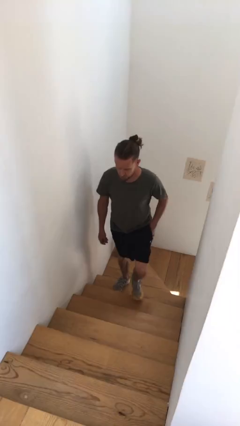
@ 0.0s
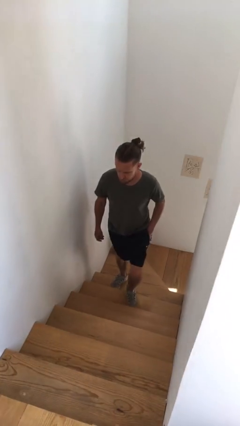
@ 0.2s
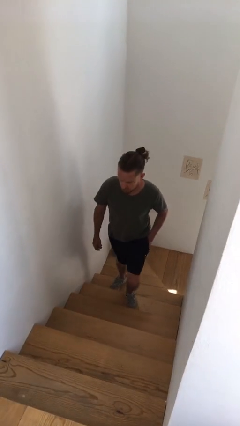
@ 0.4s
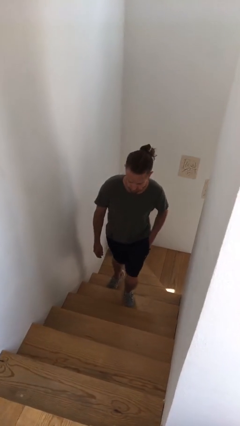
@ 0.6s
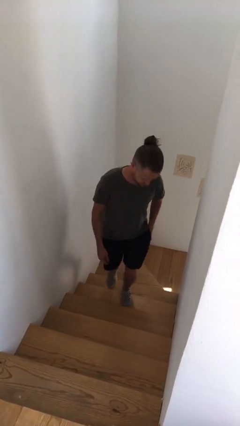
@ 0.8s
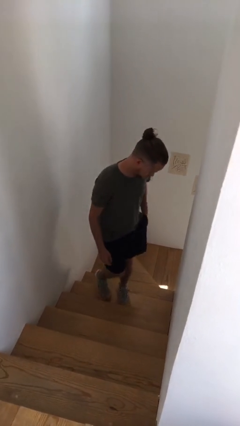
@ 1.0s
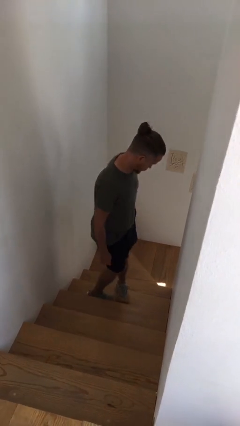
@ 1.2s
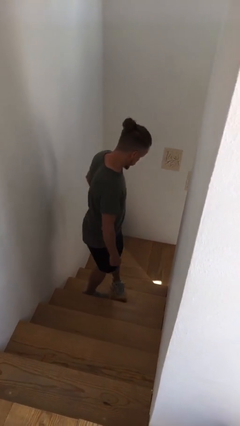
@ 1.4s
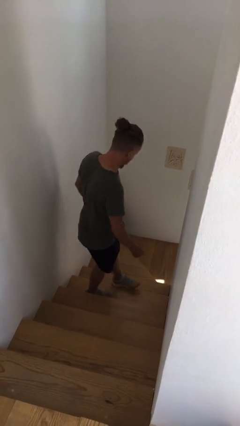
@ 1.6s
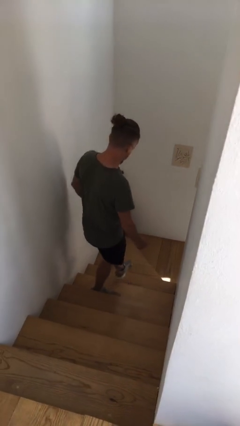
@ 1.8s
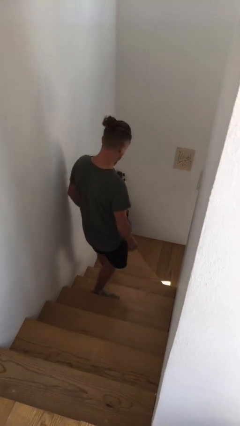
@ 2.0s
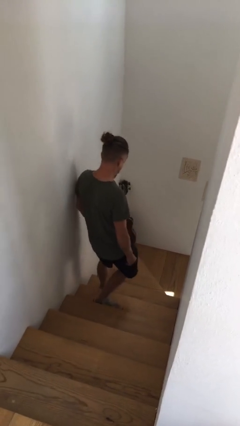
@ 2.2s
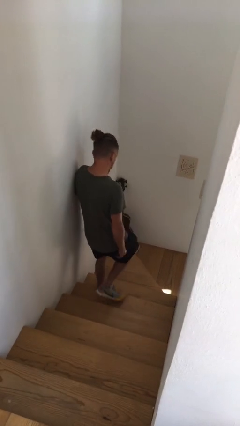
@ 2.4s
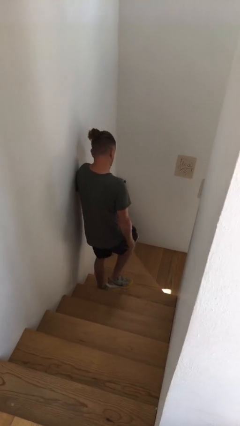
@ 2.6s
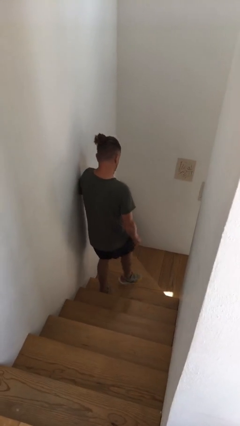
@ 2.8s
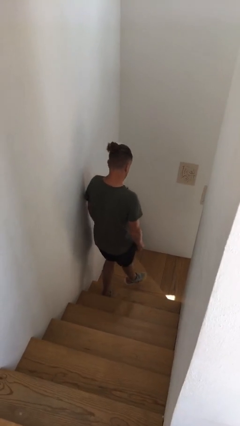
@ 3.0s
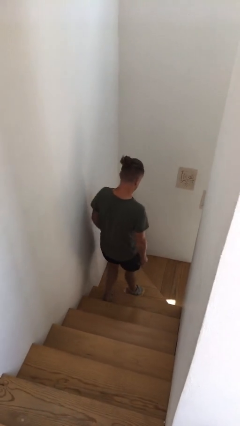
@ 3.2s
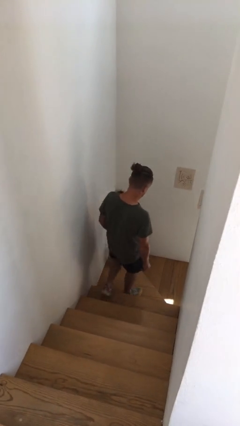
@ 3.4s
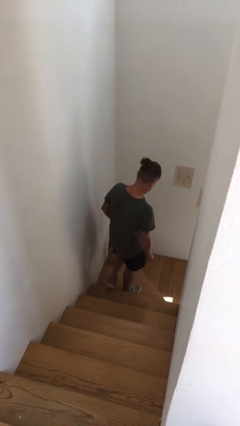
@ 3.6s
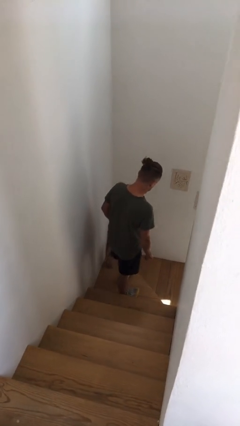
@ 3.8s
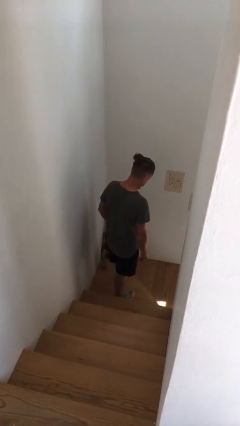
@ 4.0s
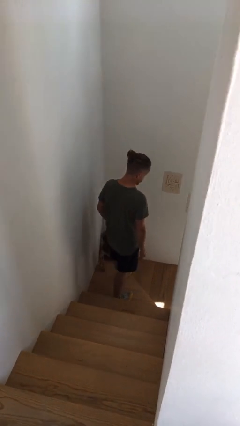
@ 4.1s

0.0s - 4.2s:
person climbs down stairs

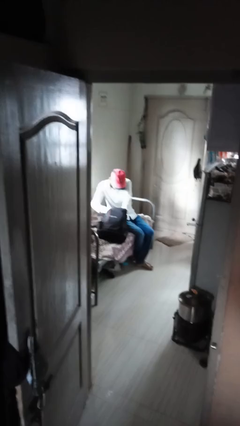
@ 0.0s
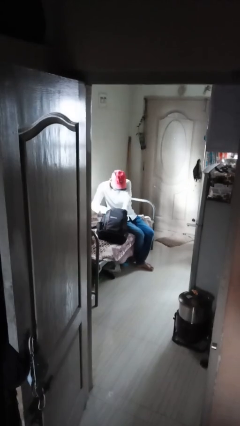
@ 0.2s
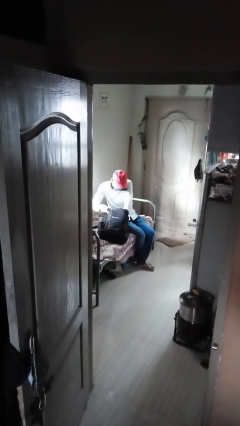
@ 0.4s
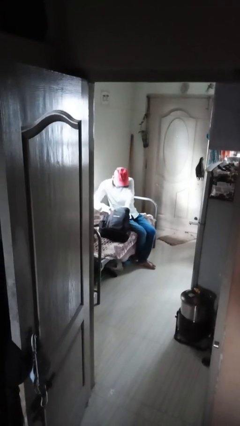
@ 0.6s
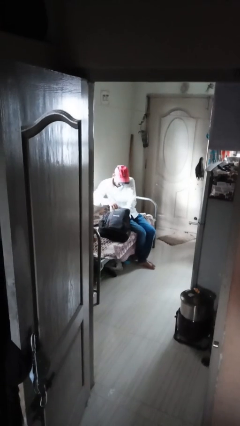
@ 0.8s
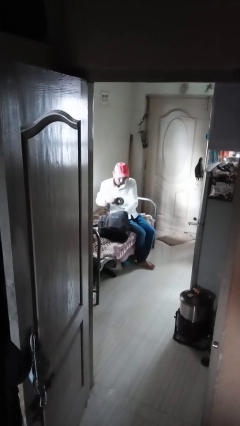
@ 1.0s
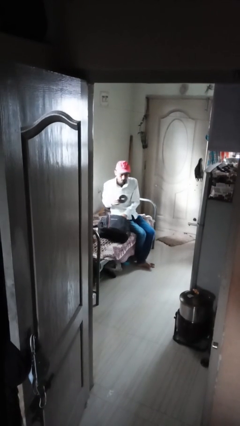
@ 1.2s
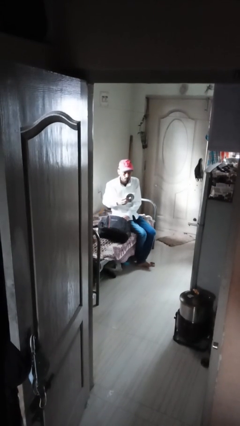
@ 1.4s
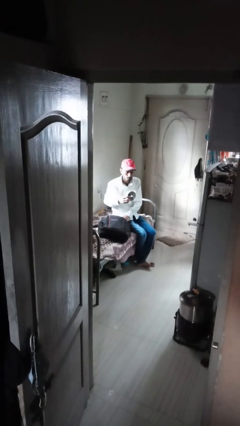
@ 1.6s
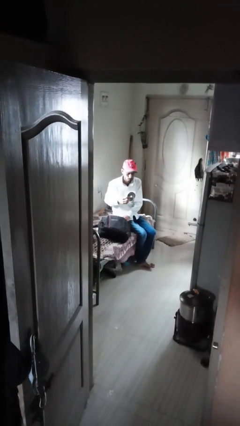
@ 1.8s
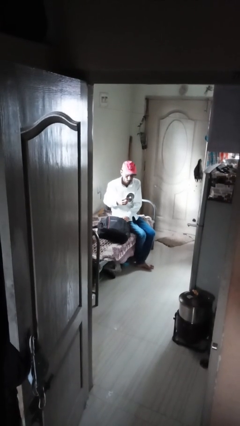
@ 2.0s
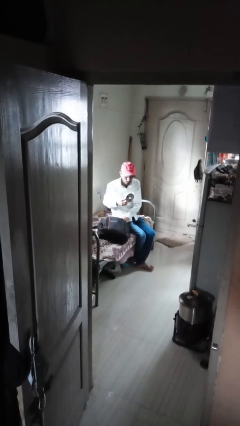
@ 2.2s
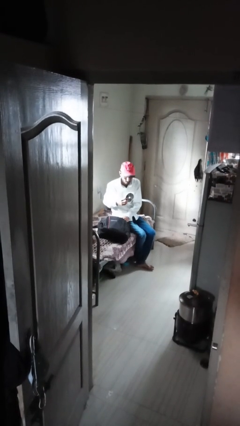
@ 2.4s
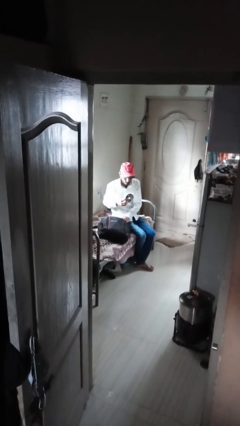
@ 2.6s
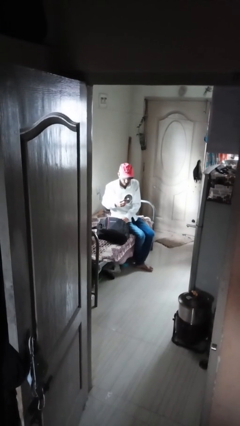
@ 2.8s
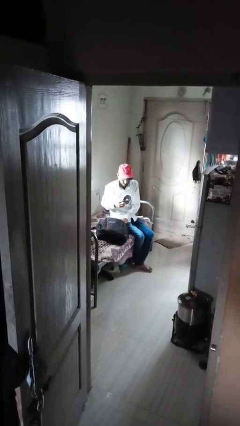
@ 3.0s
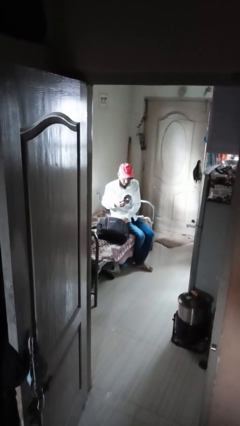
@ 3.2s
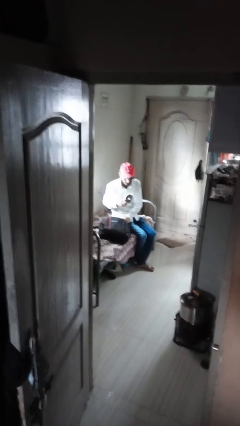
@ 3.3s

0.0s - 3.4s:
person takes object from backpack

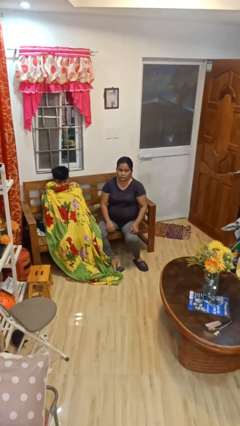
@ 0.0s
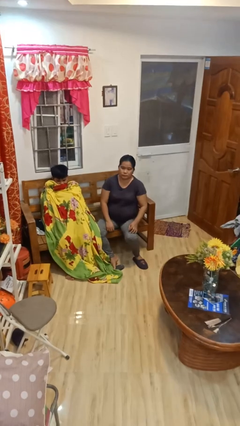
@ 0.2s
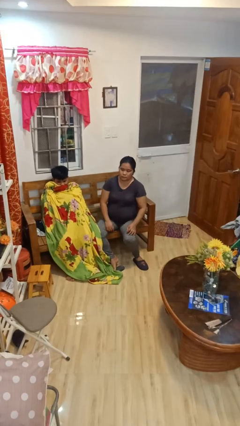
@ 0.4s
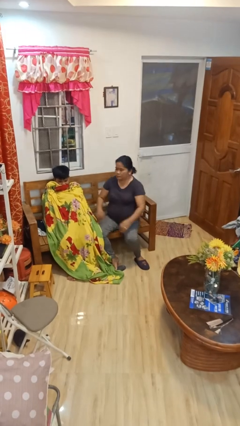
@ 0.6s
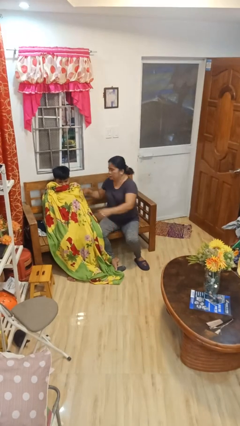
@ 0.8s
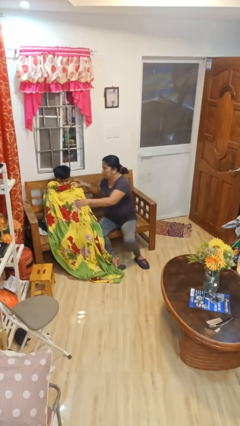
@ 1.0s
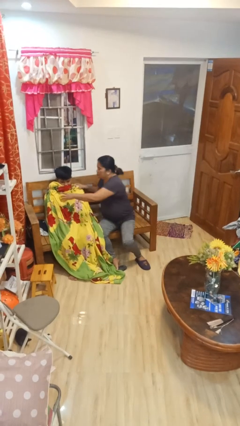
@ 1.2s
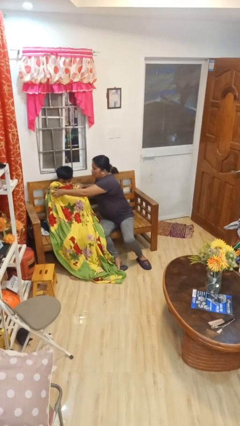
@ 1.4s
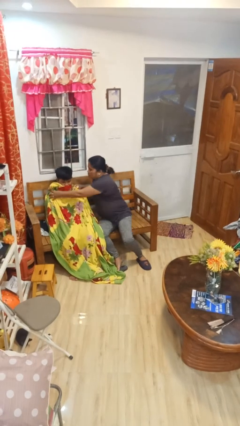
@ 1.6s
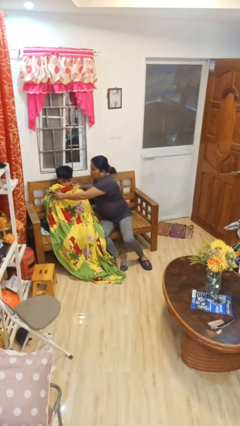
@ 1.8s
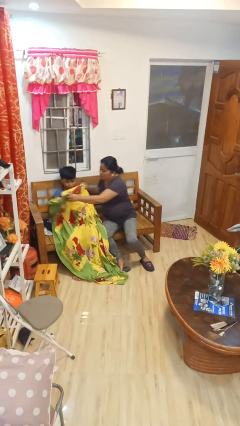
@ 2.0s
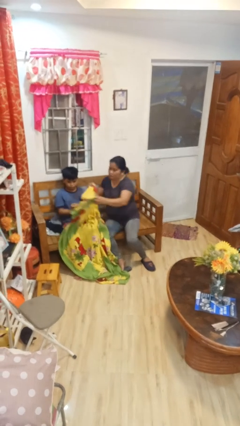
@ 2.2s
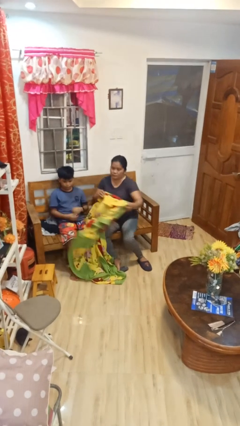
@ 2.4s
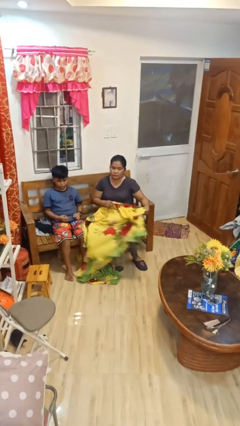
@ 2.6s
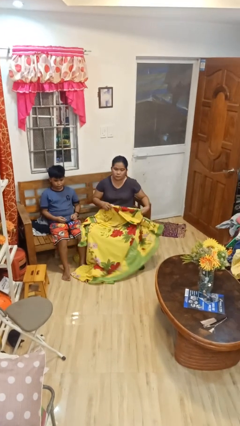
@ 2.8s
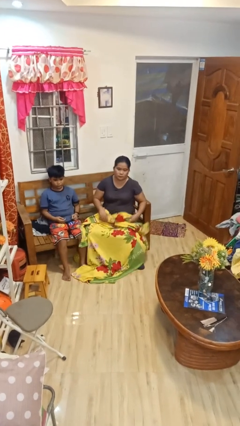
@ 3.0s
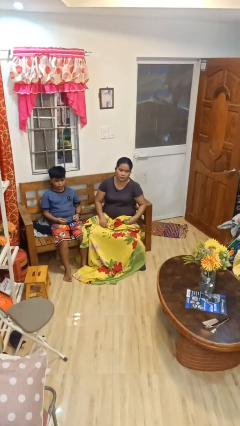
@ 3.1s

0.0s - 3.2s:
person uncovers friend with blanket

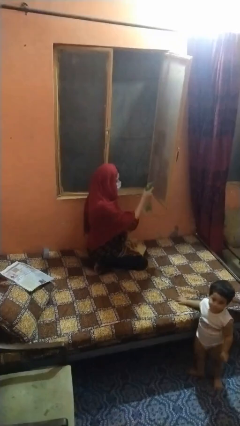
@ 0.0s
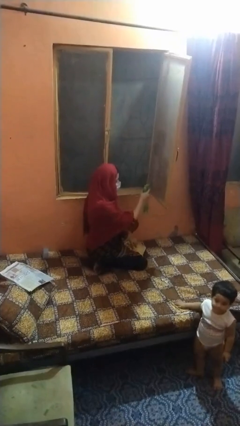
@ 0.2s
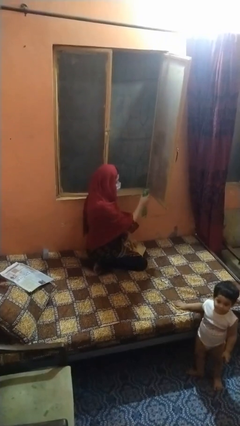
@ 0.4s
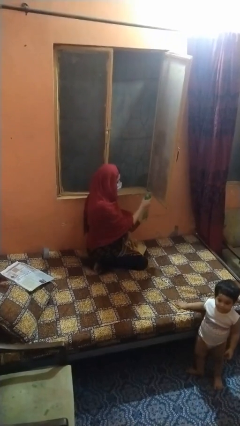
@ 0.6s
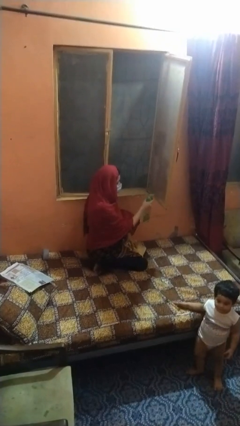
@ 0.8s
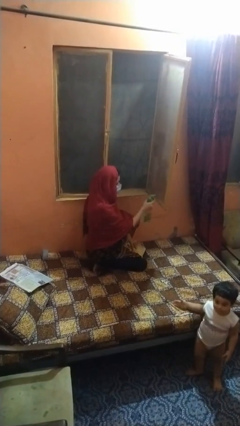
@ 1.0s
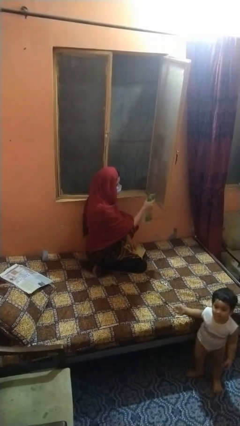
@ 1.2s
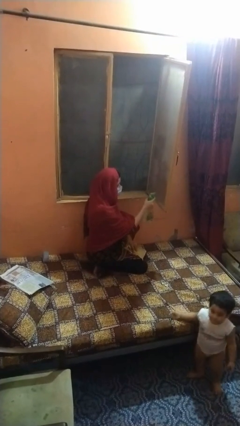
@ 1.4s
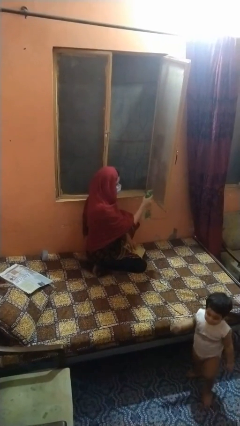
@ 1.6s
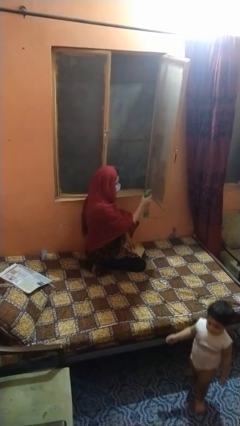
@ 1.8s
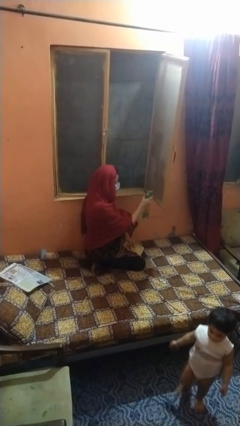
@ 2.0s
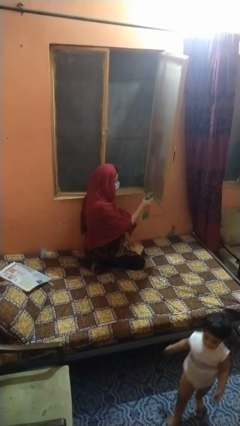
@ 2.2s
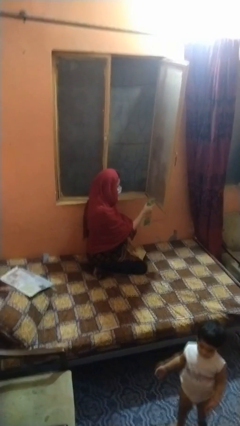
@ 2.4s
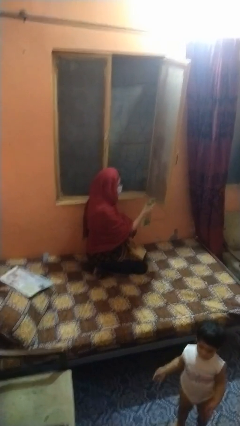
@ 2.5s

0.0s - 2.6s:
person sprays from bottle

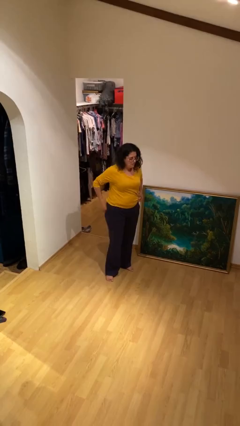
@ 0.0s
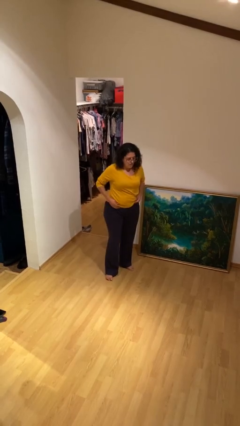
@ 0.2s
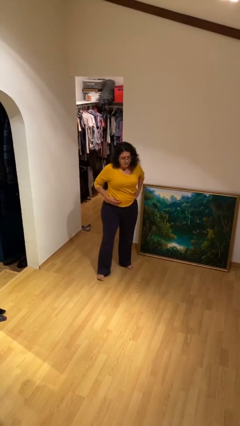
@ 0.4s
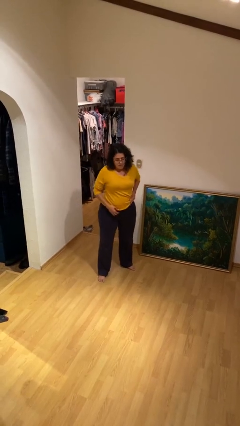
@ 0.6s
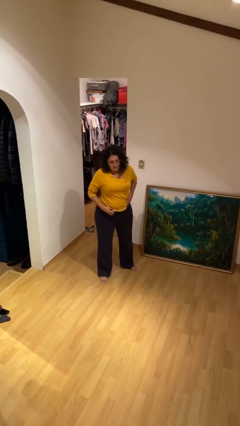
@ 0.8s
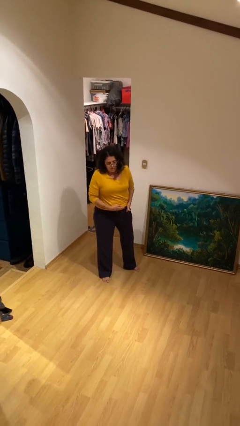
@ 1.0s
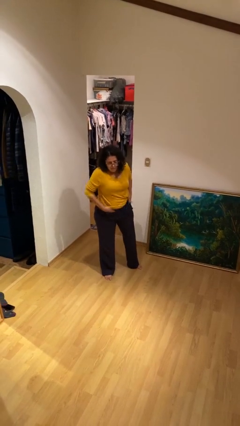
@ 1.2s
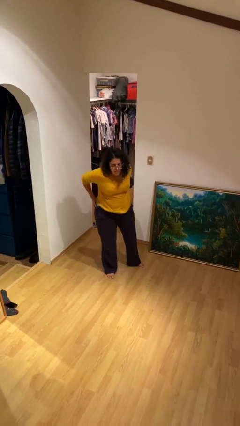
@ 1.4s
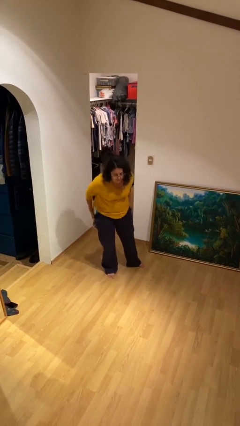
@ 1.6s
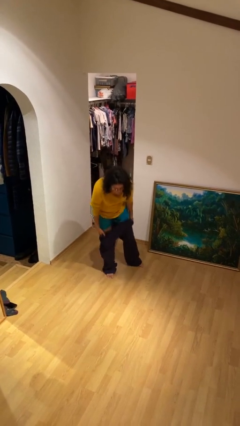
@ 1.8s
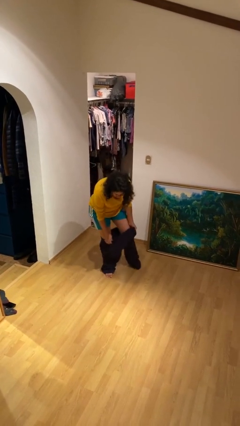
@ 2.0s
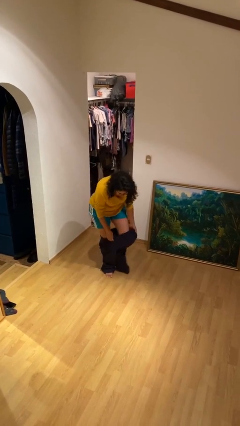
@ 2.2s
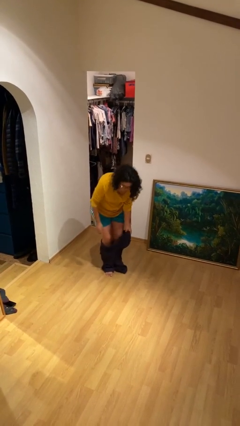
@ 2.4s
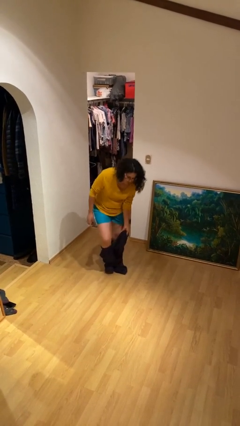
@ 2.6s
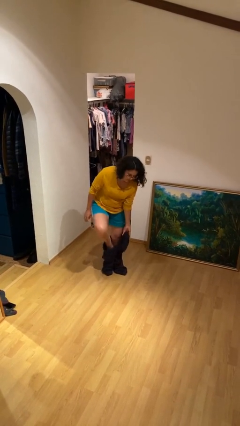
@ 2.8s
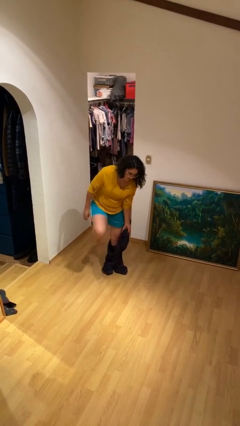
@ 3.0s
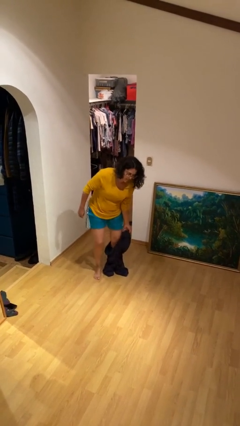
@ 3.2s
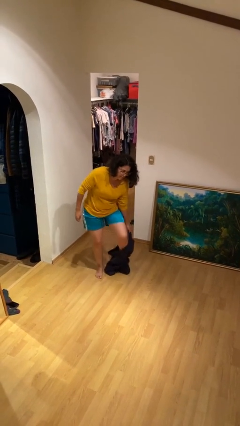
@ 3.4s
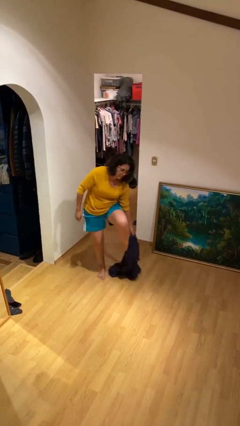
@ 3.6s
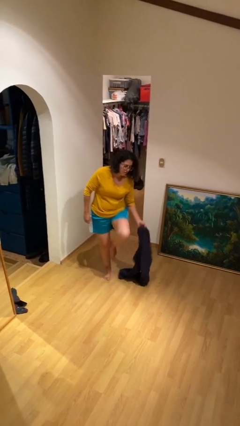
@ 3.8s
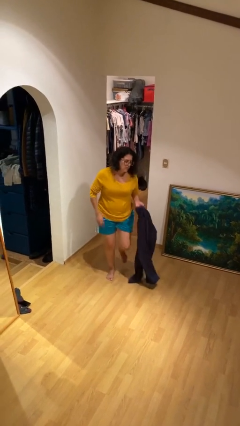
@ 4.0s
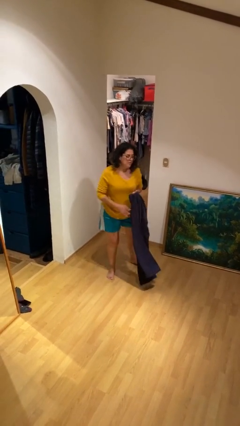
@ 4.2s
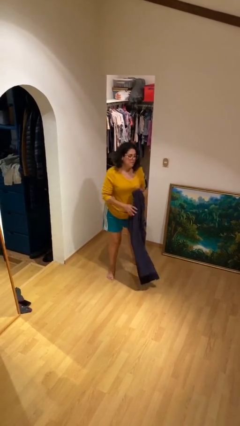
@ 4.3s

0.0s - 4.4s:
person takes off pants
